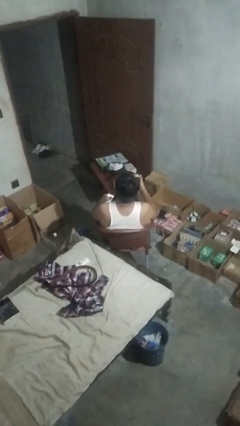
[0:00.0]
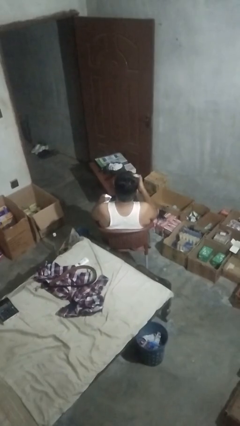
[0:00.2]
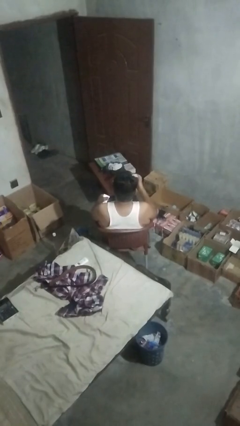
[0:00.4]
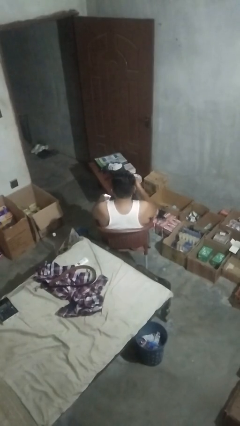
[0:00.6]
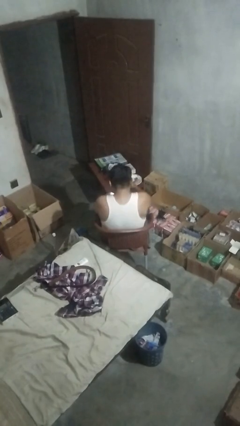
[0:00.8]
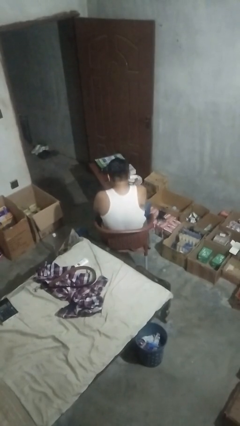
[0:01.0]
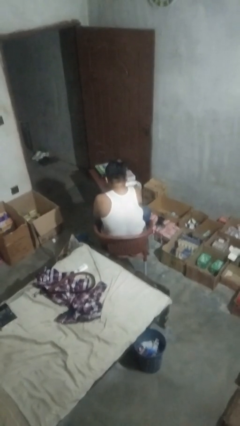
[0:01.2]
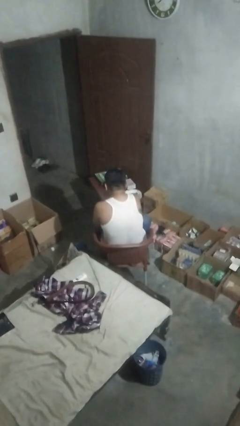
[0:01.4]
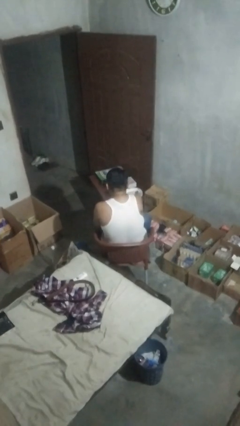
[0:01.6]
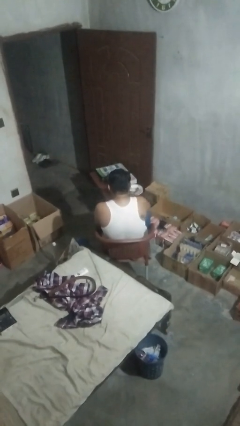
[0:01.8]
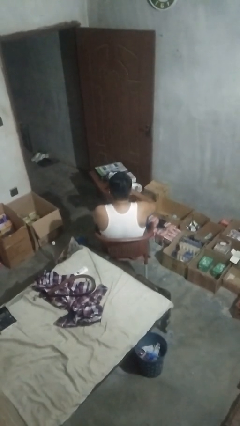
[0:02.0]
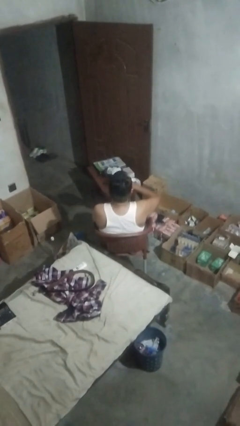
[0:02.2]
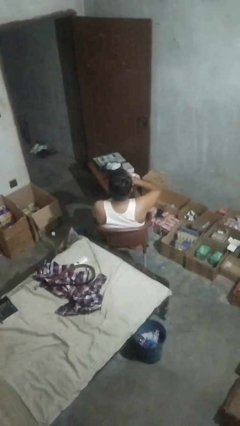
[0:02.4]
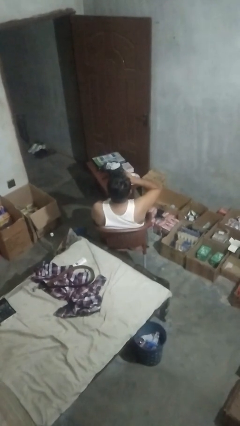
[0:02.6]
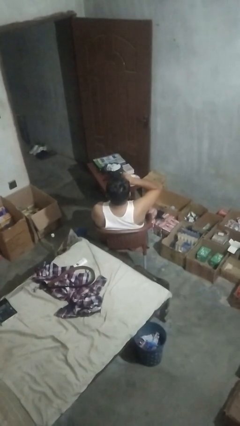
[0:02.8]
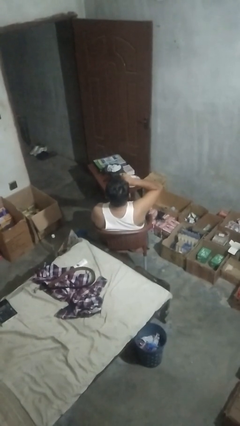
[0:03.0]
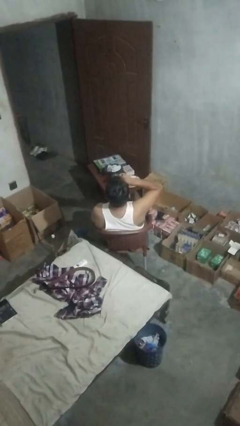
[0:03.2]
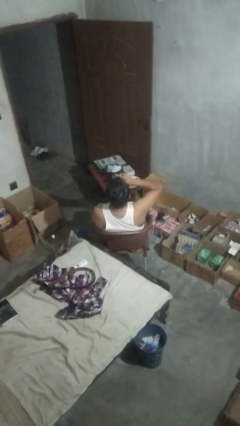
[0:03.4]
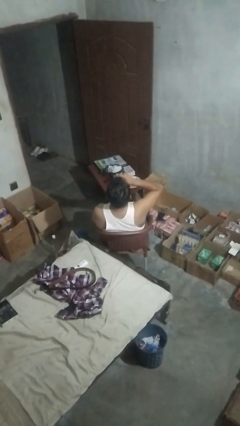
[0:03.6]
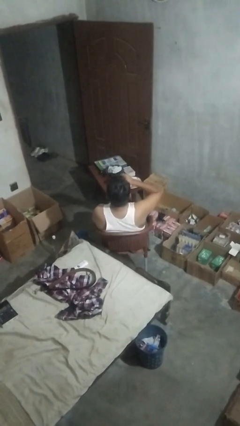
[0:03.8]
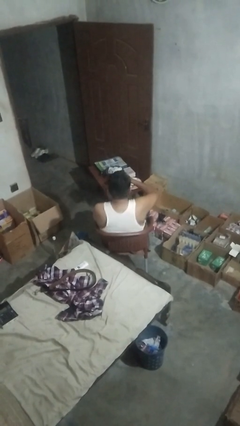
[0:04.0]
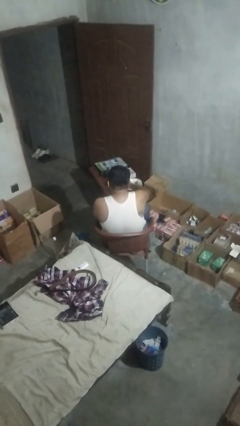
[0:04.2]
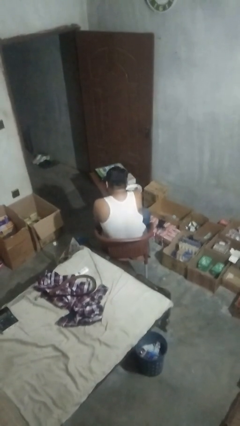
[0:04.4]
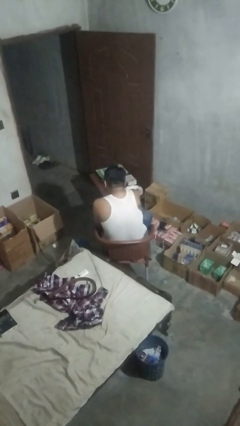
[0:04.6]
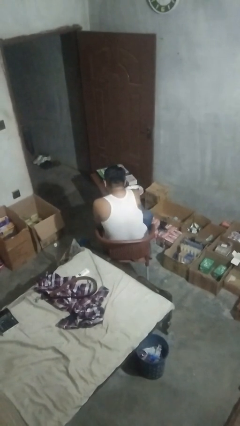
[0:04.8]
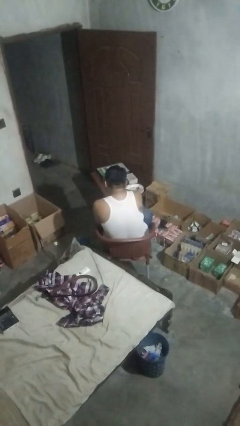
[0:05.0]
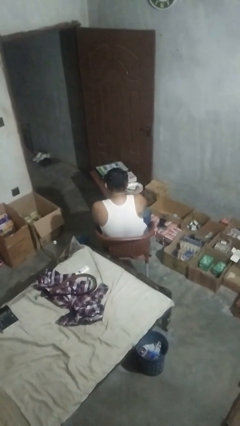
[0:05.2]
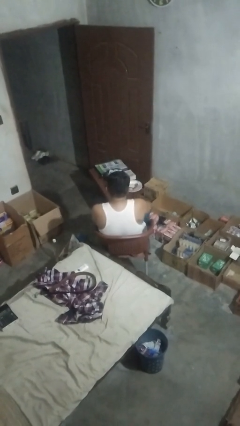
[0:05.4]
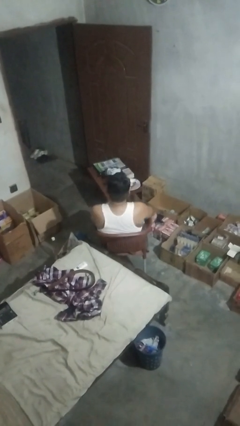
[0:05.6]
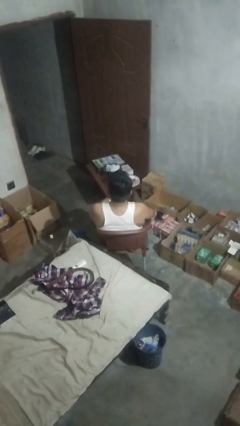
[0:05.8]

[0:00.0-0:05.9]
person drinks from cup

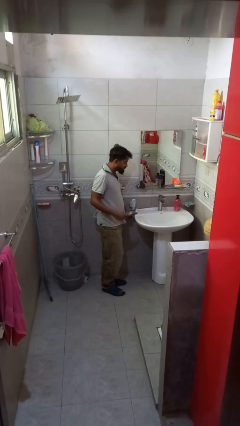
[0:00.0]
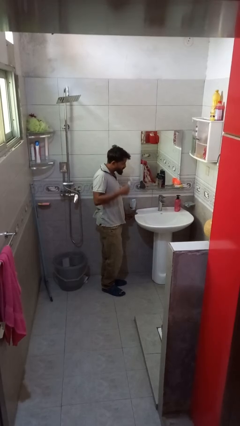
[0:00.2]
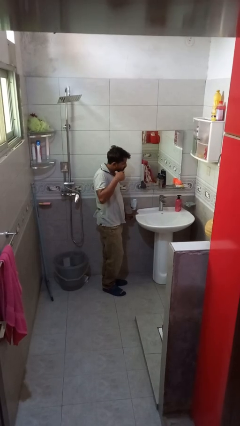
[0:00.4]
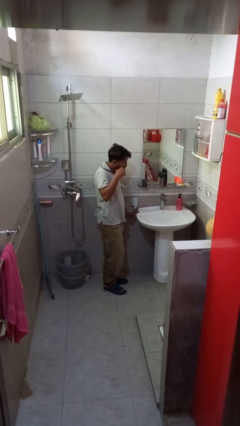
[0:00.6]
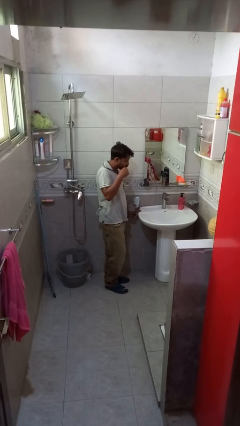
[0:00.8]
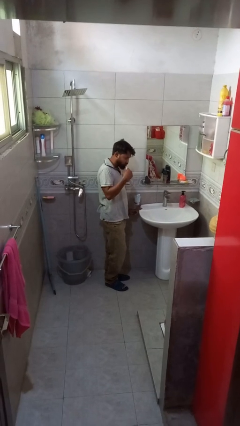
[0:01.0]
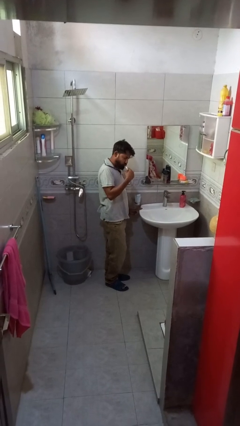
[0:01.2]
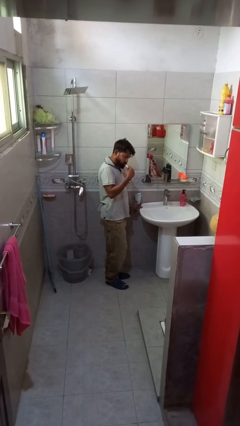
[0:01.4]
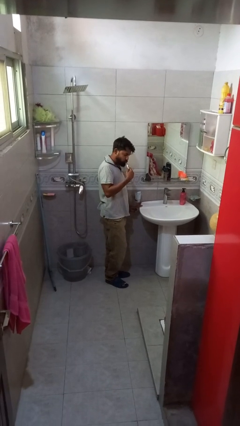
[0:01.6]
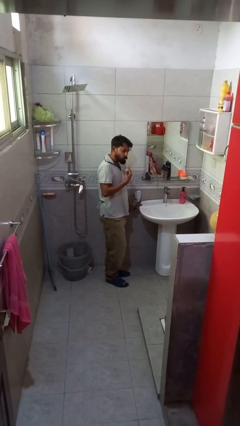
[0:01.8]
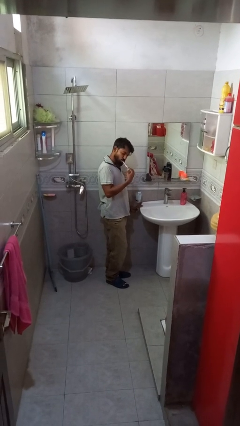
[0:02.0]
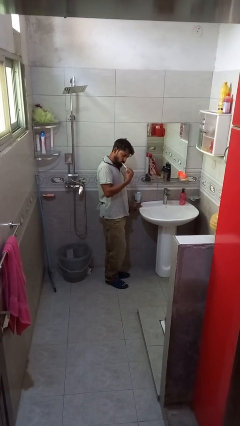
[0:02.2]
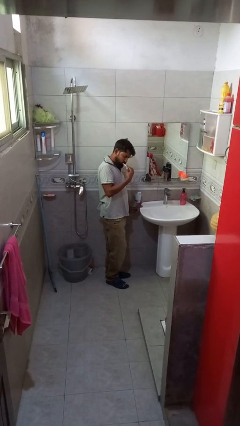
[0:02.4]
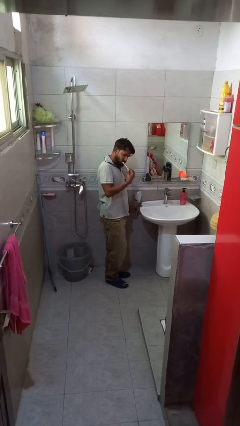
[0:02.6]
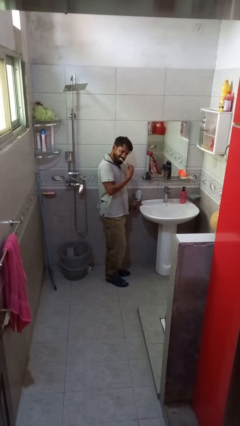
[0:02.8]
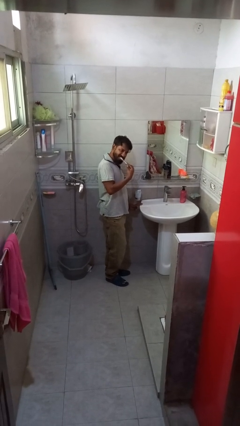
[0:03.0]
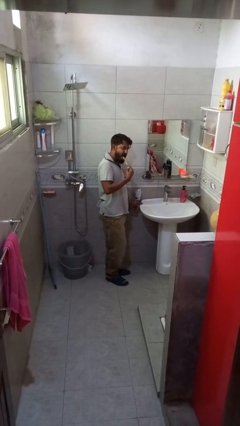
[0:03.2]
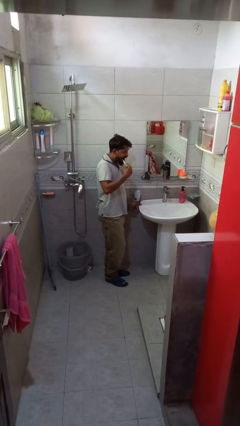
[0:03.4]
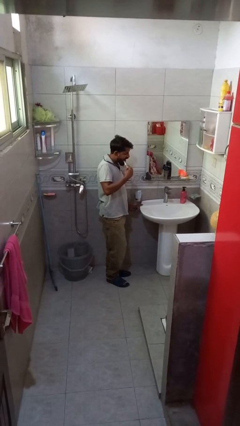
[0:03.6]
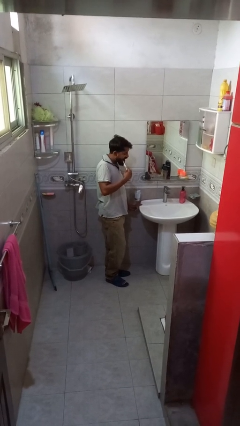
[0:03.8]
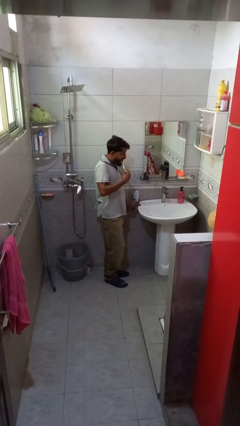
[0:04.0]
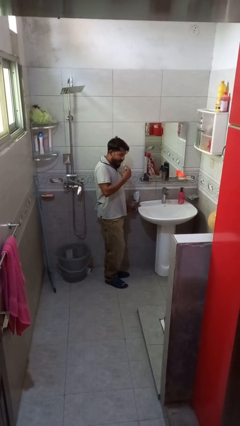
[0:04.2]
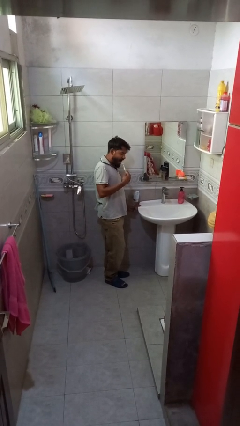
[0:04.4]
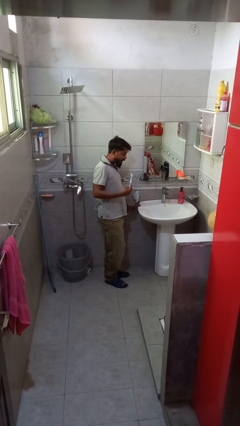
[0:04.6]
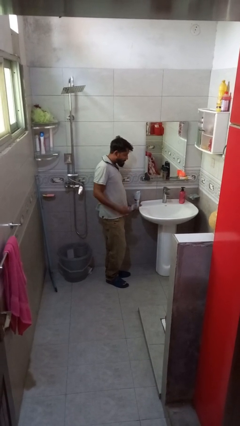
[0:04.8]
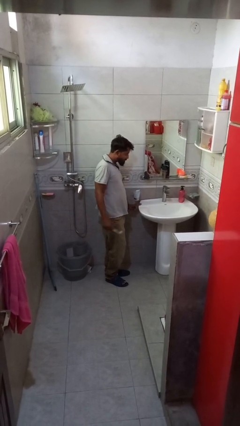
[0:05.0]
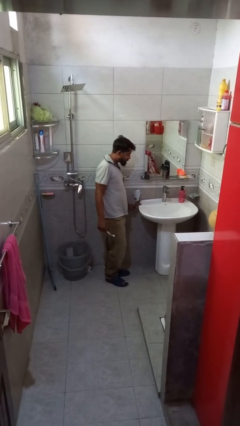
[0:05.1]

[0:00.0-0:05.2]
person brushes teeth

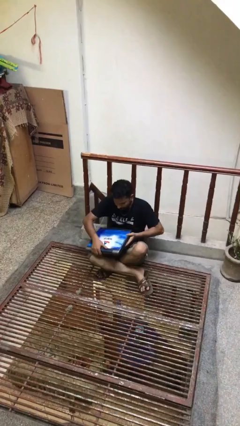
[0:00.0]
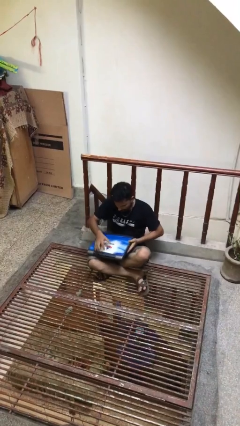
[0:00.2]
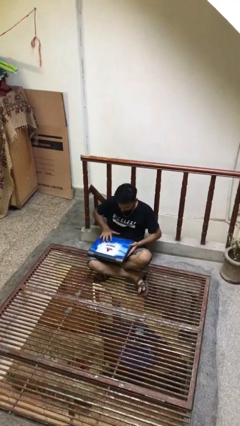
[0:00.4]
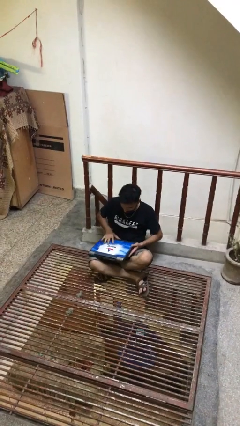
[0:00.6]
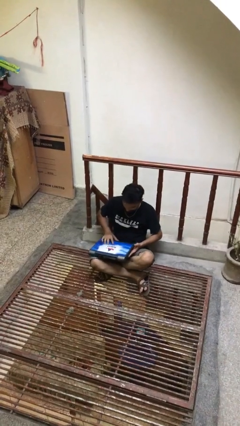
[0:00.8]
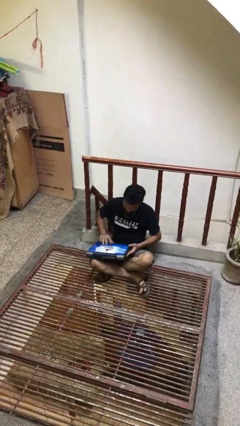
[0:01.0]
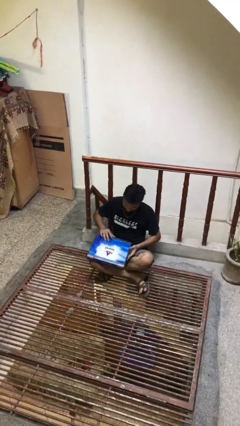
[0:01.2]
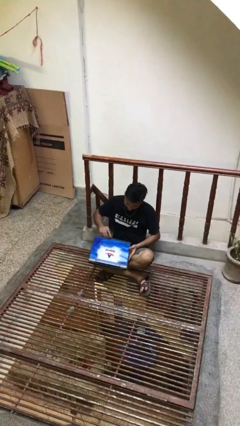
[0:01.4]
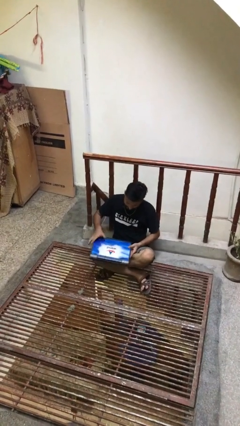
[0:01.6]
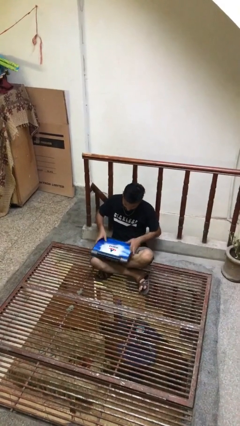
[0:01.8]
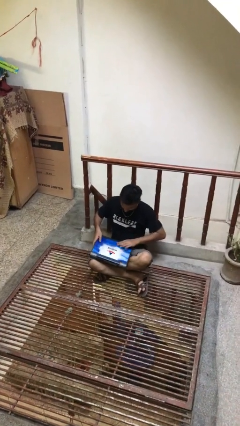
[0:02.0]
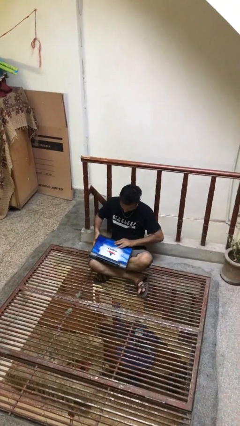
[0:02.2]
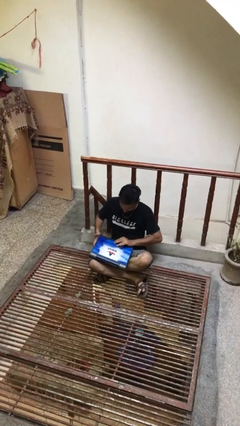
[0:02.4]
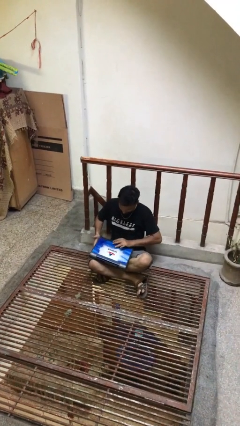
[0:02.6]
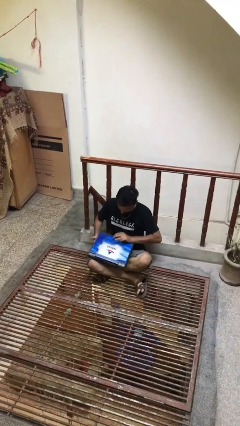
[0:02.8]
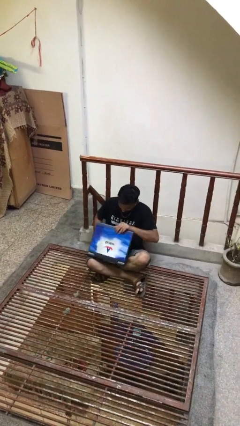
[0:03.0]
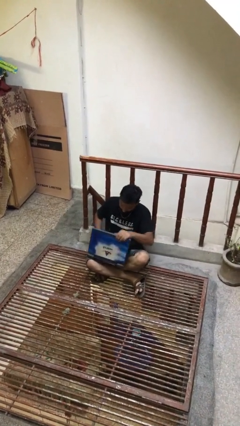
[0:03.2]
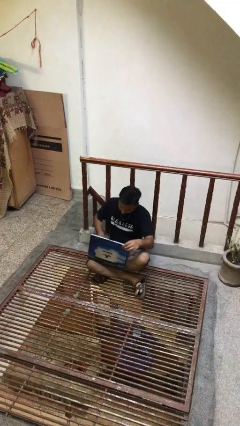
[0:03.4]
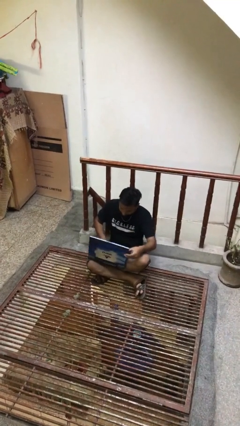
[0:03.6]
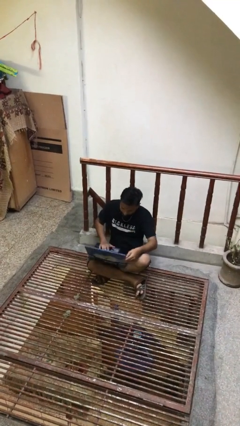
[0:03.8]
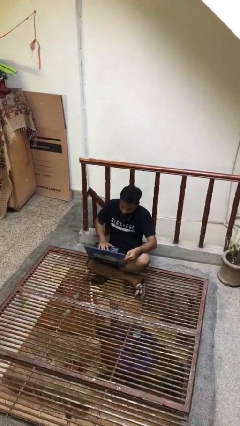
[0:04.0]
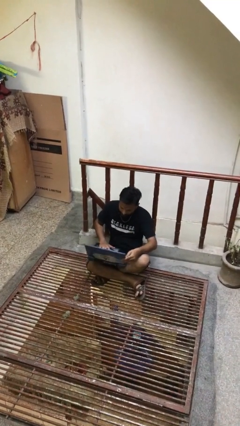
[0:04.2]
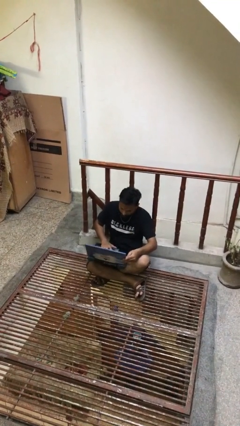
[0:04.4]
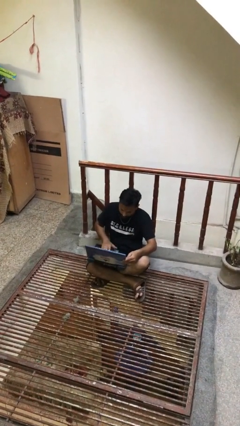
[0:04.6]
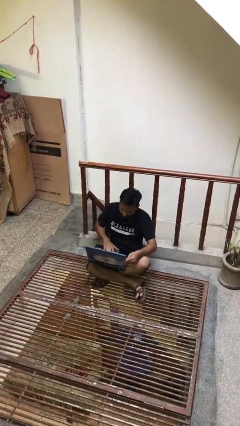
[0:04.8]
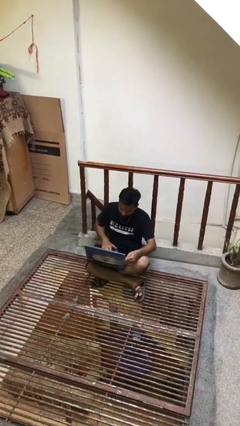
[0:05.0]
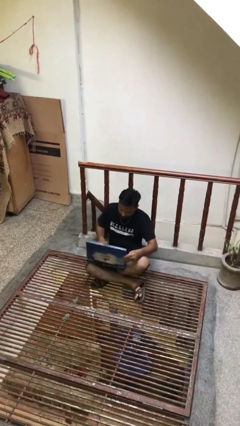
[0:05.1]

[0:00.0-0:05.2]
person interacts with laptop

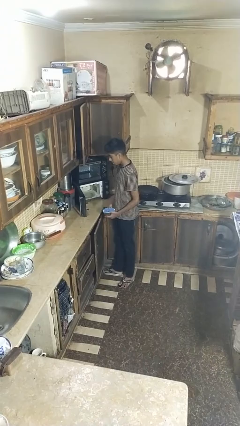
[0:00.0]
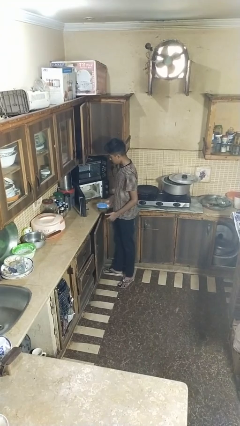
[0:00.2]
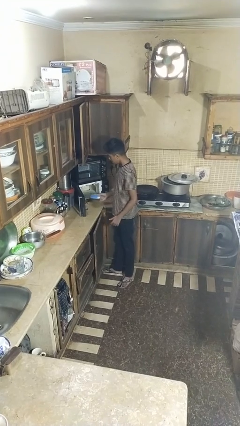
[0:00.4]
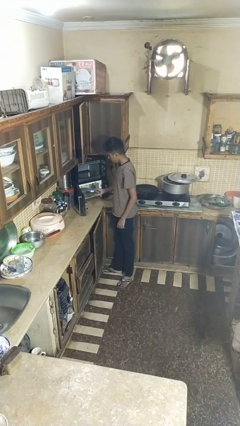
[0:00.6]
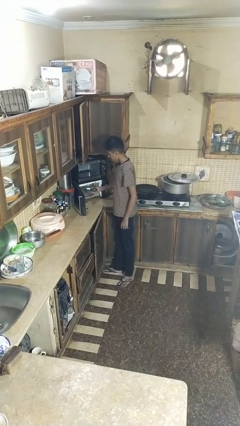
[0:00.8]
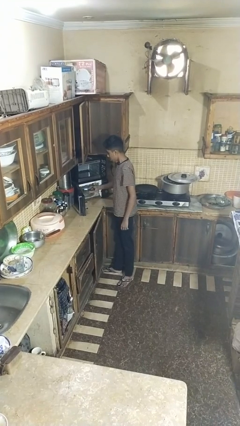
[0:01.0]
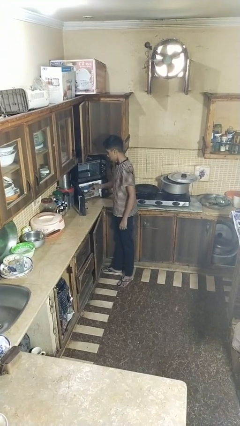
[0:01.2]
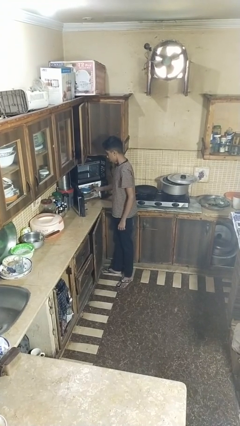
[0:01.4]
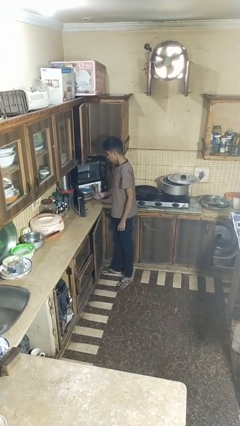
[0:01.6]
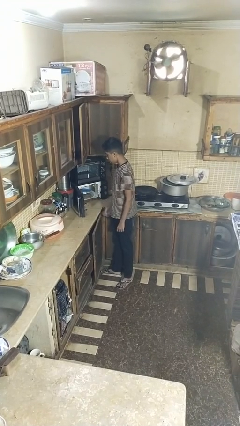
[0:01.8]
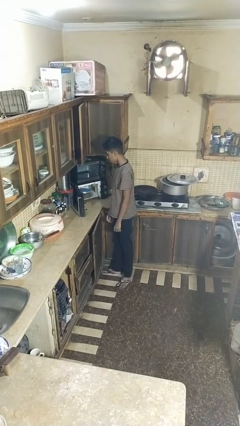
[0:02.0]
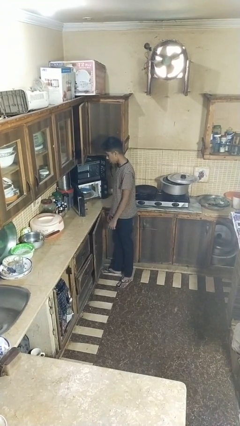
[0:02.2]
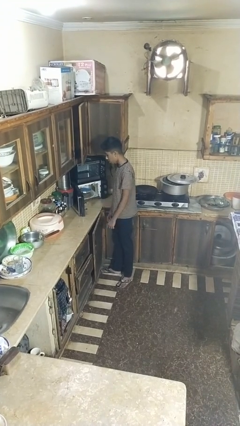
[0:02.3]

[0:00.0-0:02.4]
person puts object into microwave
